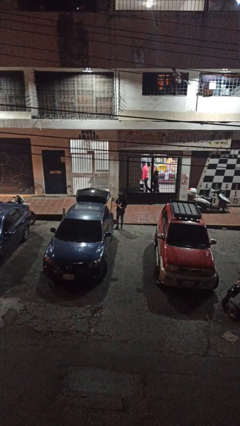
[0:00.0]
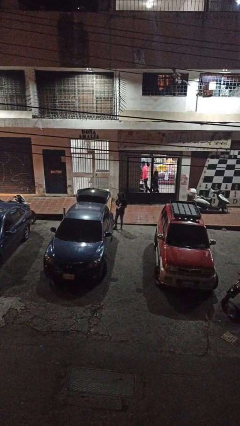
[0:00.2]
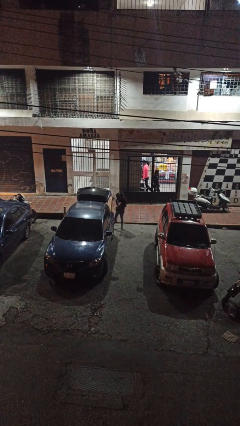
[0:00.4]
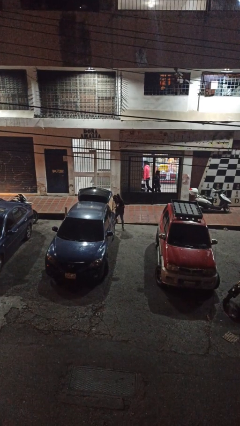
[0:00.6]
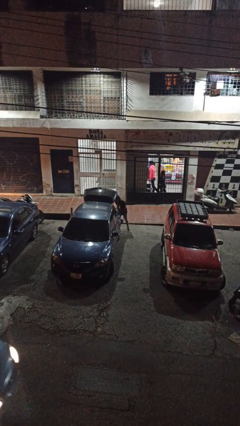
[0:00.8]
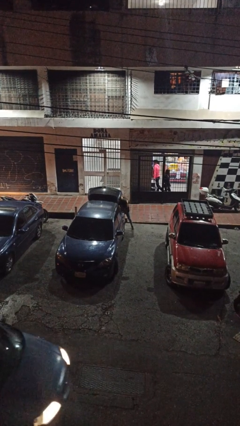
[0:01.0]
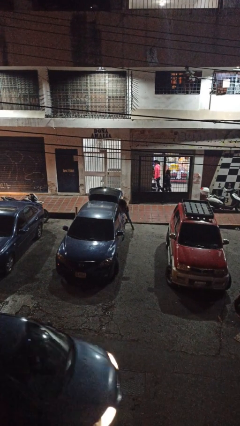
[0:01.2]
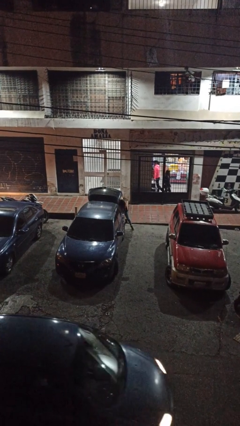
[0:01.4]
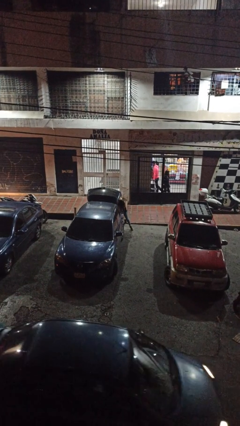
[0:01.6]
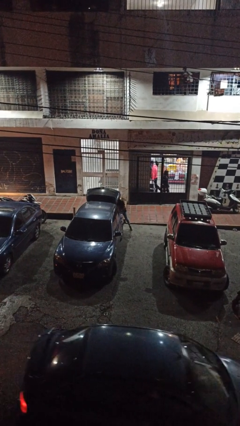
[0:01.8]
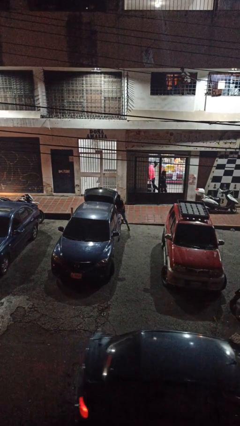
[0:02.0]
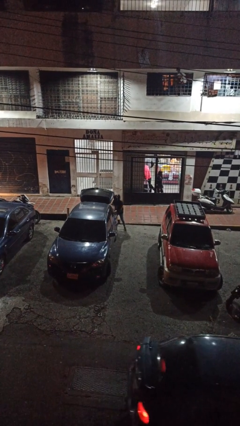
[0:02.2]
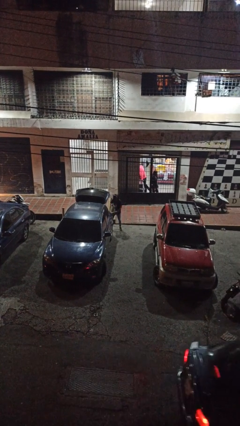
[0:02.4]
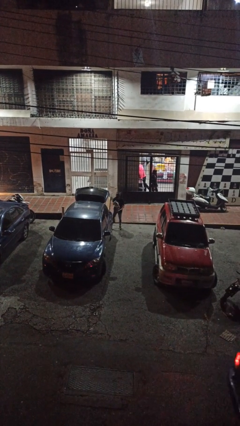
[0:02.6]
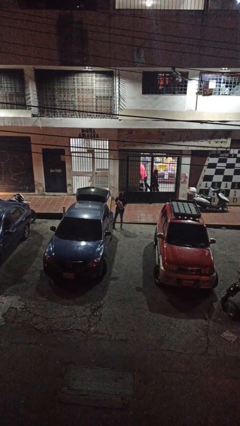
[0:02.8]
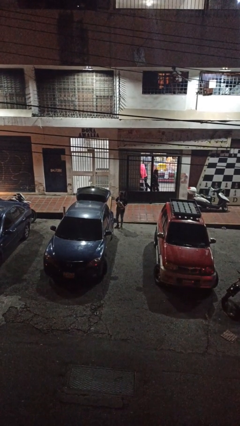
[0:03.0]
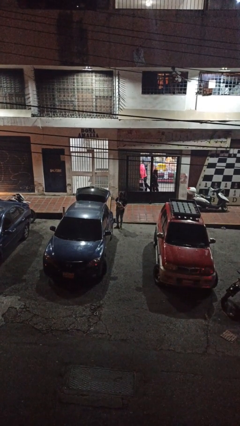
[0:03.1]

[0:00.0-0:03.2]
person unloads car

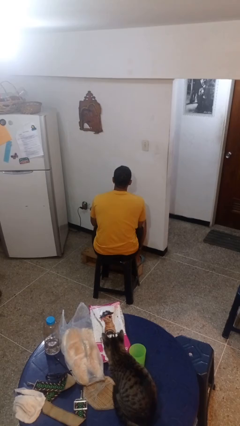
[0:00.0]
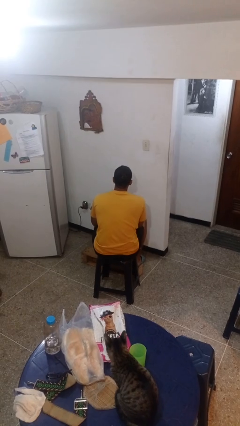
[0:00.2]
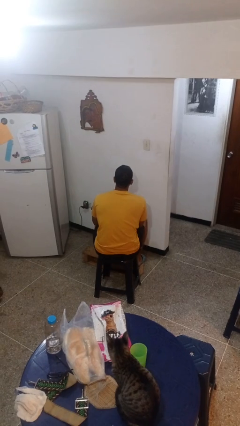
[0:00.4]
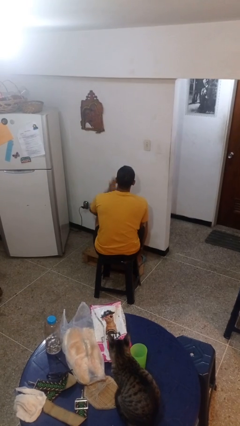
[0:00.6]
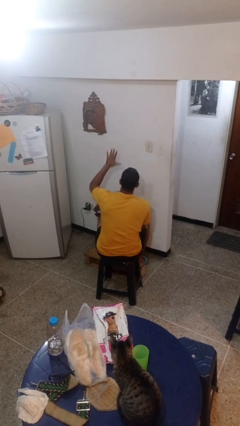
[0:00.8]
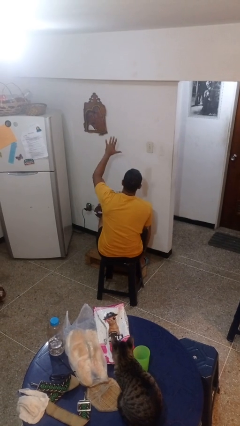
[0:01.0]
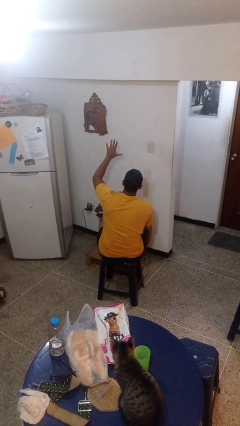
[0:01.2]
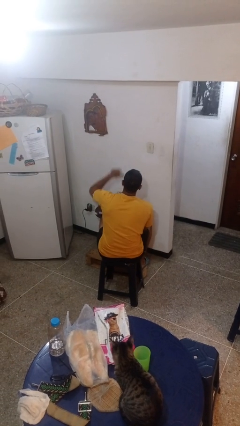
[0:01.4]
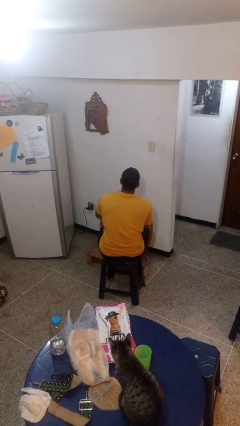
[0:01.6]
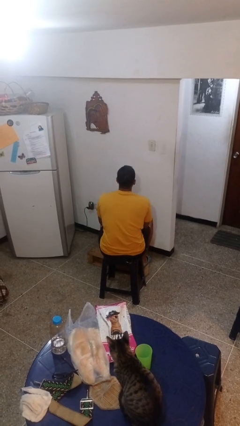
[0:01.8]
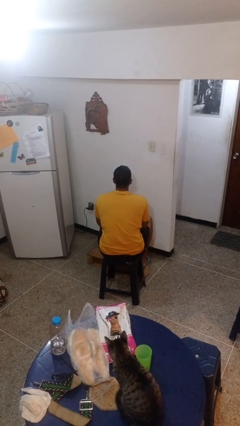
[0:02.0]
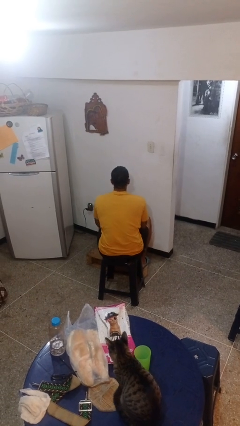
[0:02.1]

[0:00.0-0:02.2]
person gestures number five

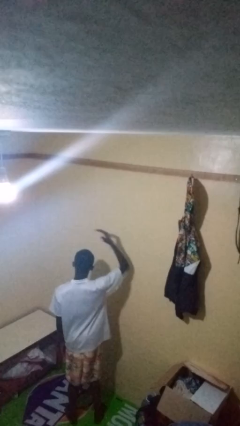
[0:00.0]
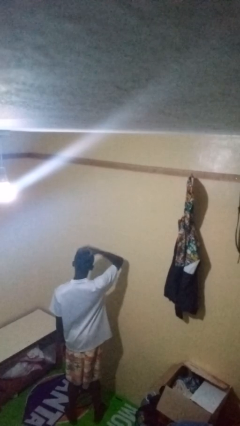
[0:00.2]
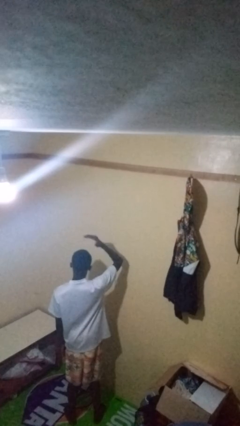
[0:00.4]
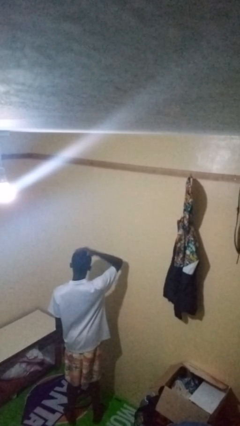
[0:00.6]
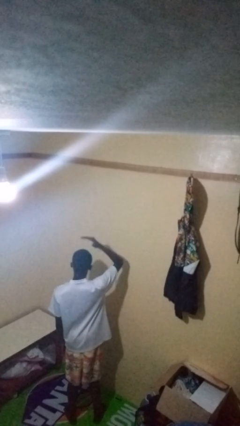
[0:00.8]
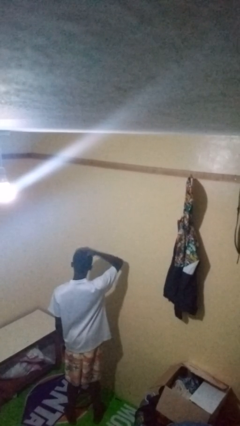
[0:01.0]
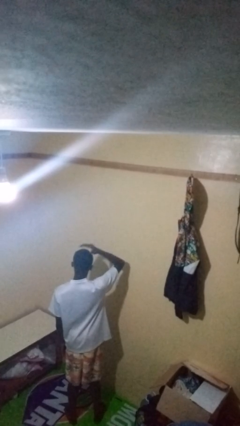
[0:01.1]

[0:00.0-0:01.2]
person pats head

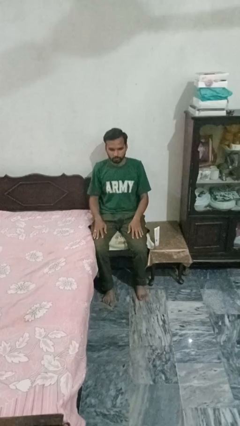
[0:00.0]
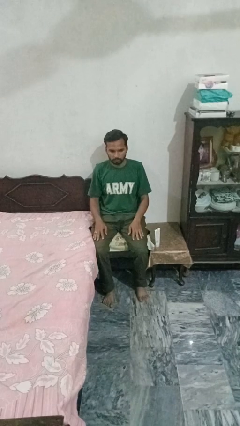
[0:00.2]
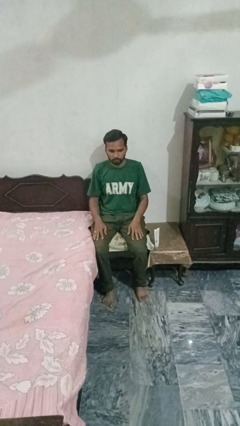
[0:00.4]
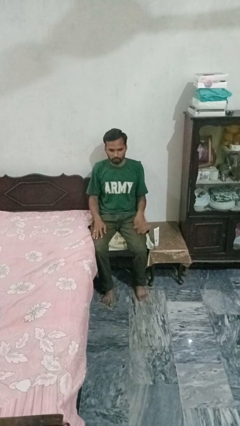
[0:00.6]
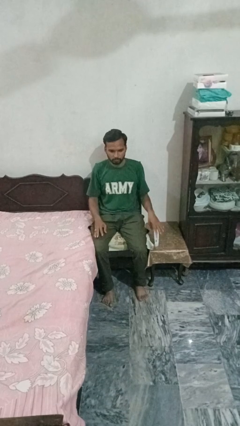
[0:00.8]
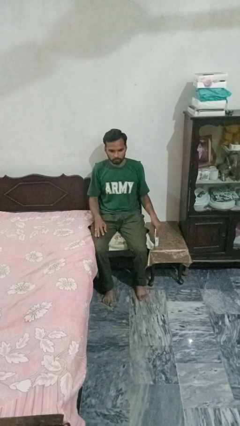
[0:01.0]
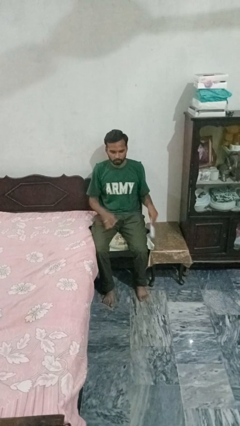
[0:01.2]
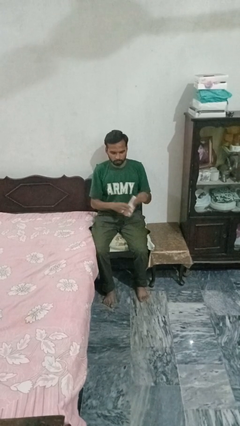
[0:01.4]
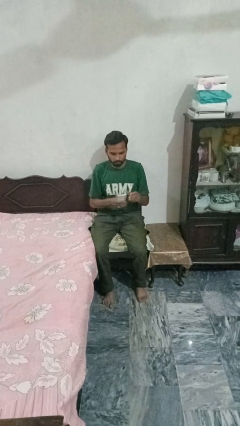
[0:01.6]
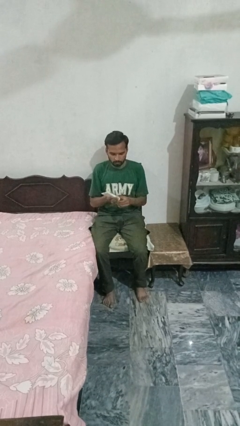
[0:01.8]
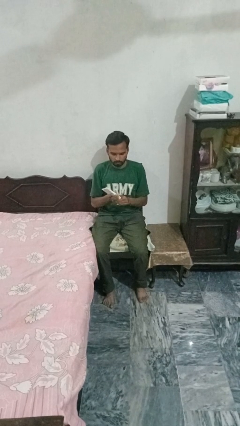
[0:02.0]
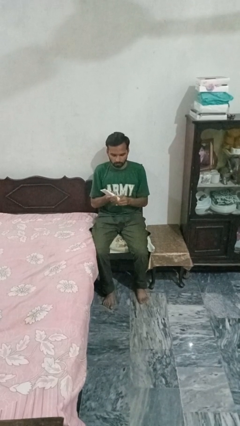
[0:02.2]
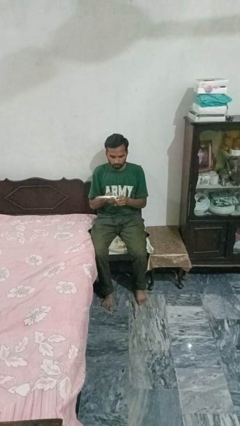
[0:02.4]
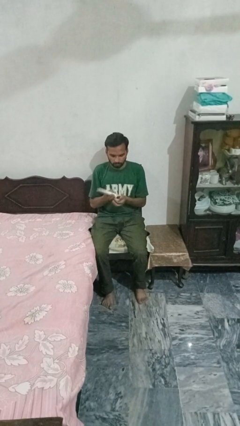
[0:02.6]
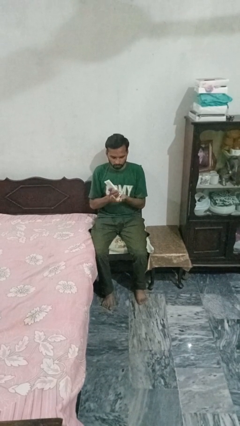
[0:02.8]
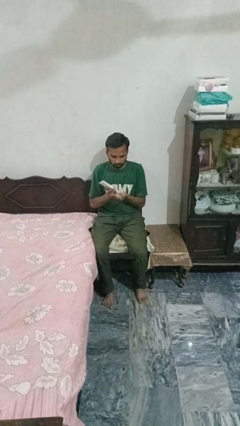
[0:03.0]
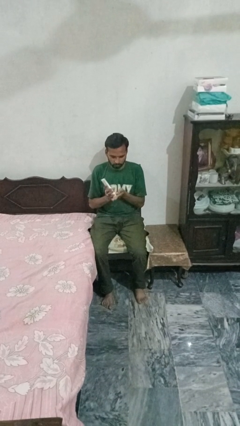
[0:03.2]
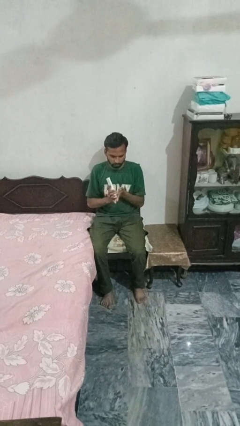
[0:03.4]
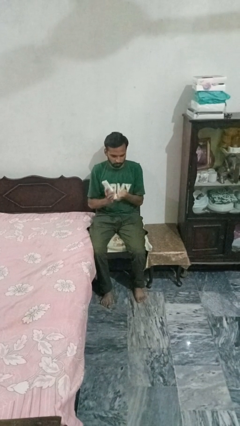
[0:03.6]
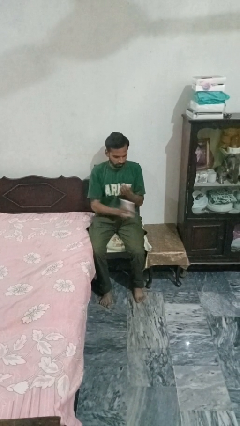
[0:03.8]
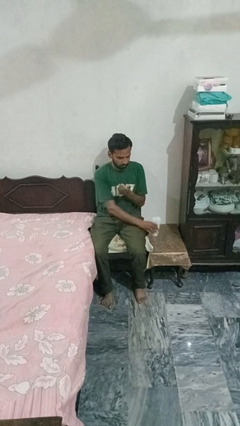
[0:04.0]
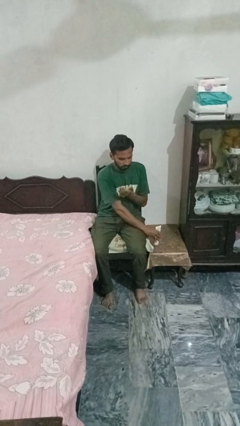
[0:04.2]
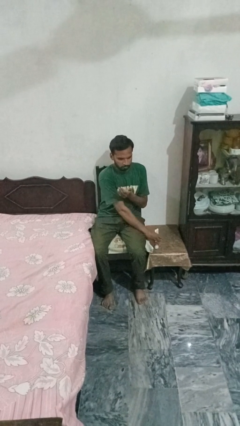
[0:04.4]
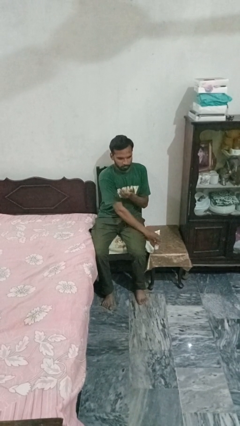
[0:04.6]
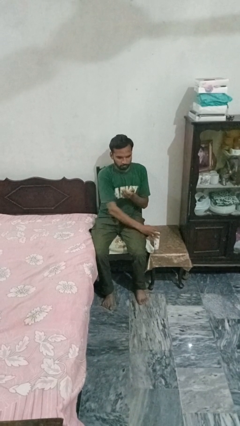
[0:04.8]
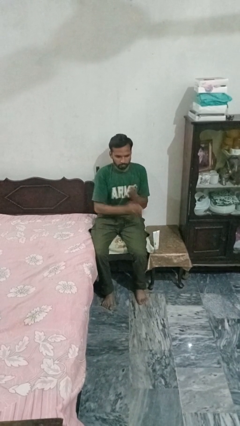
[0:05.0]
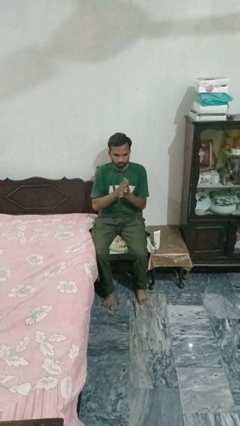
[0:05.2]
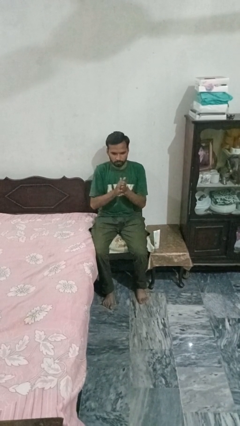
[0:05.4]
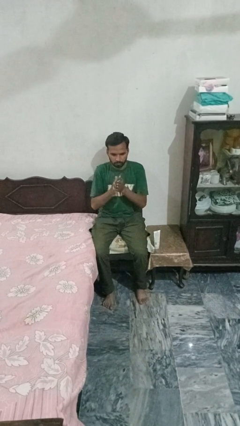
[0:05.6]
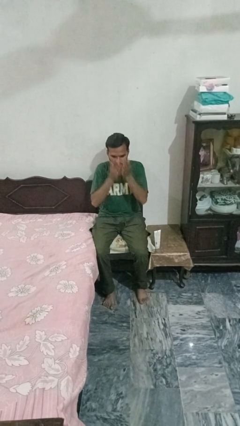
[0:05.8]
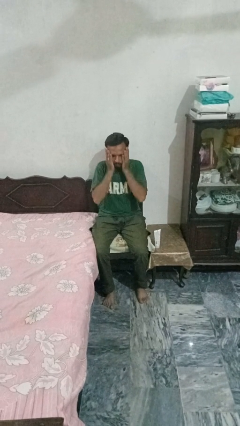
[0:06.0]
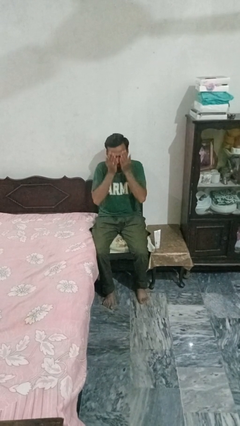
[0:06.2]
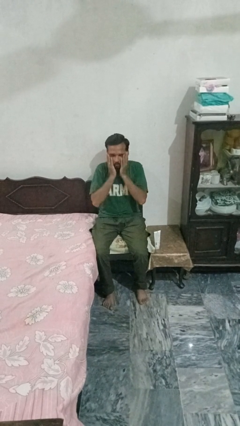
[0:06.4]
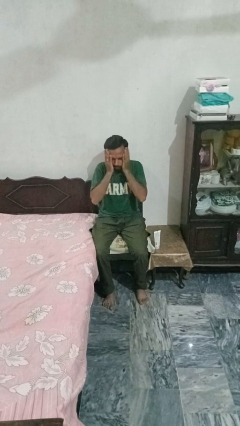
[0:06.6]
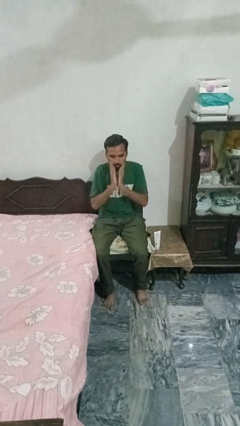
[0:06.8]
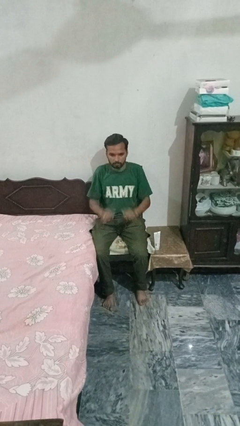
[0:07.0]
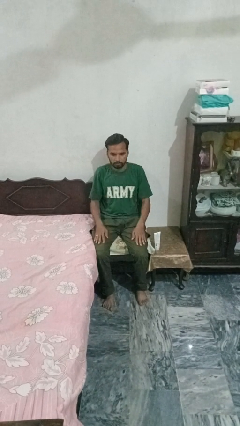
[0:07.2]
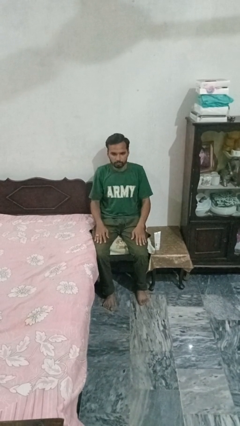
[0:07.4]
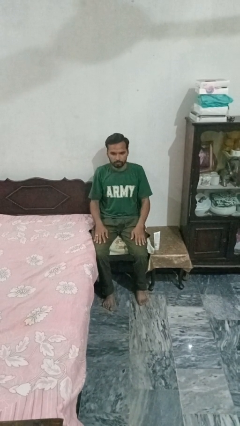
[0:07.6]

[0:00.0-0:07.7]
person applies facial moisturizer

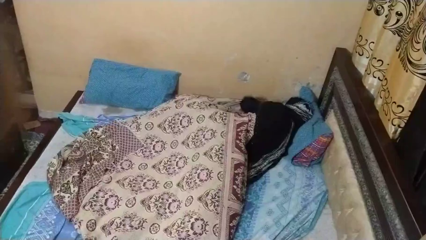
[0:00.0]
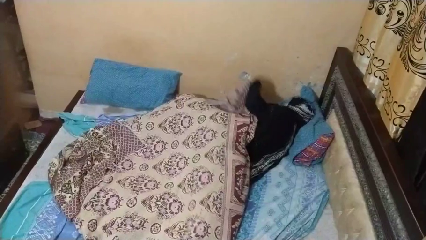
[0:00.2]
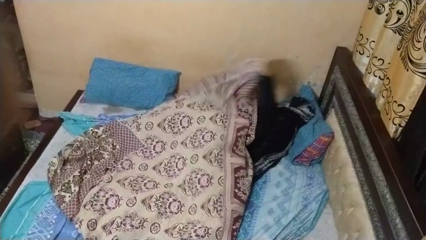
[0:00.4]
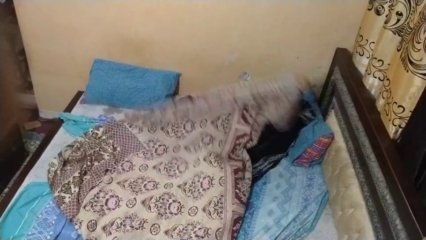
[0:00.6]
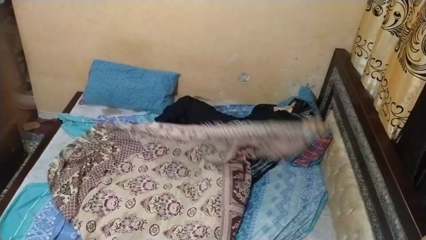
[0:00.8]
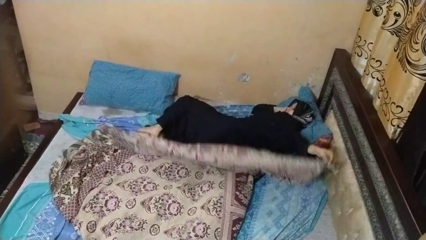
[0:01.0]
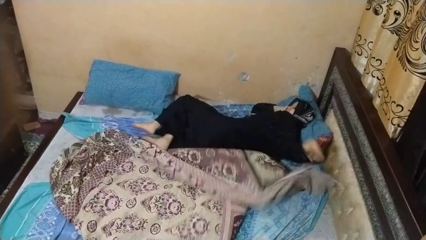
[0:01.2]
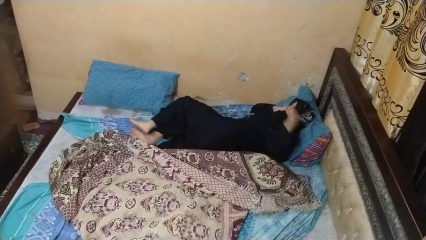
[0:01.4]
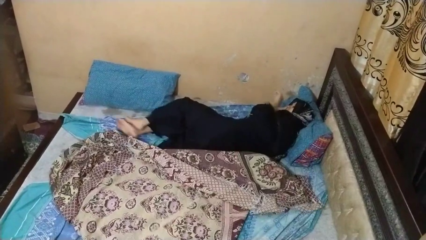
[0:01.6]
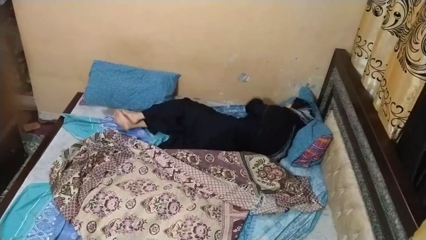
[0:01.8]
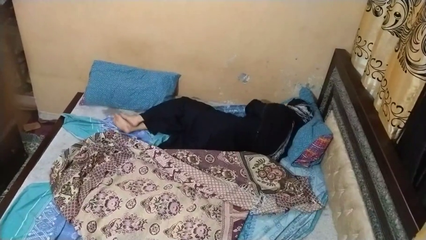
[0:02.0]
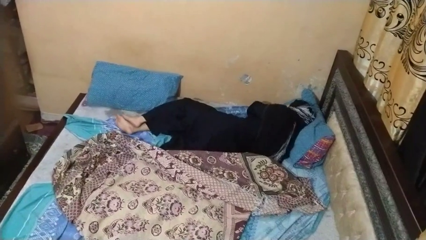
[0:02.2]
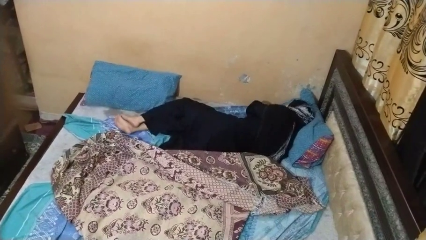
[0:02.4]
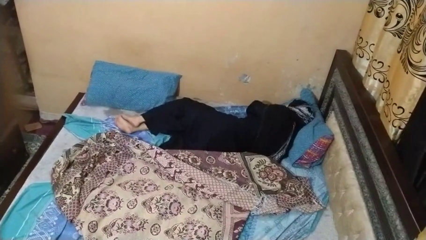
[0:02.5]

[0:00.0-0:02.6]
person uncovers with blanket

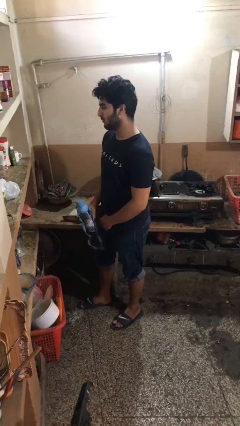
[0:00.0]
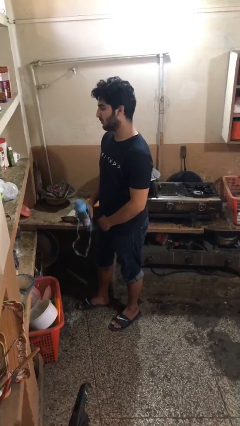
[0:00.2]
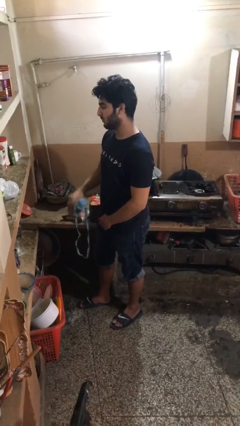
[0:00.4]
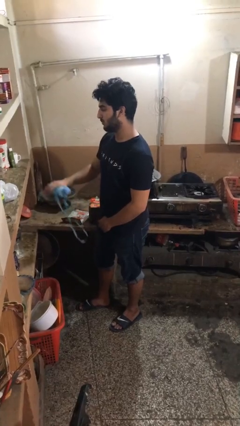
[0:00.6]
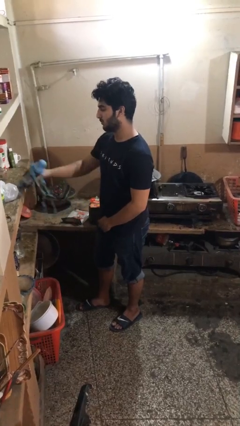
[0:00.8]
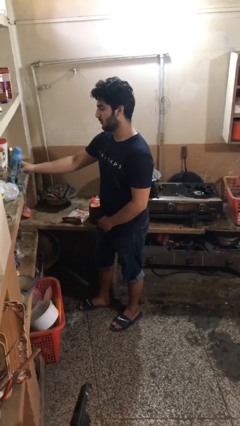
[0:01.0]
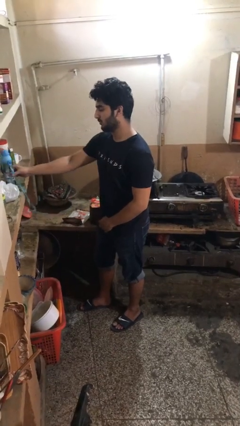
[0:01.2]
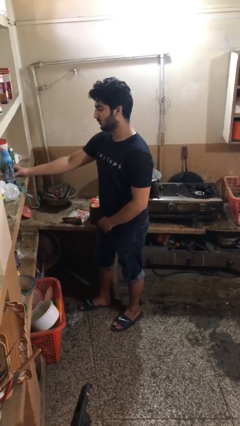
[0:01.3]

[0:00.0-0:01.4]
person puts down object on countertop
